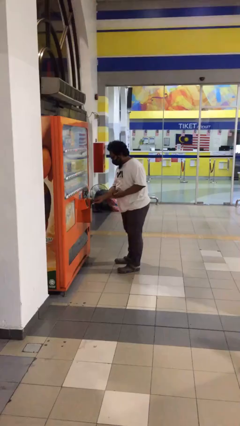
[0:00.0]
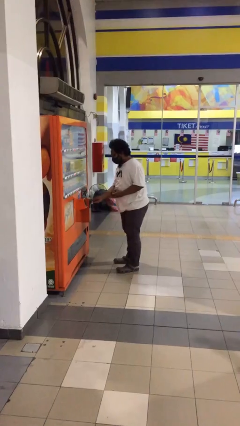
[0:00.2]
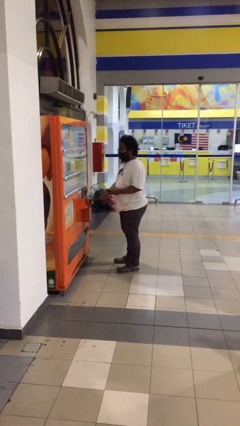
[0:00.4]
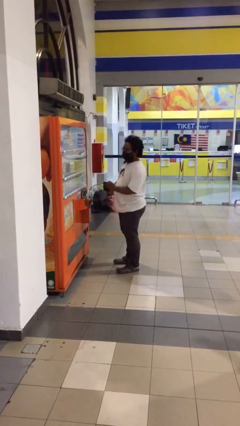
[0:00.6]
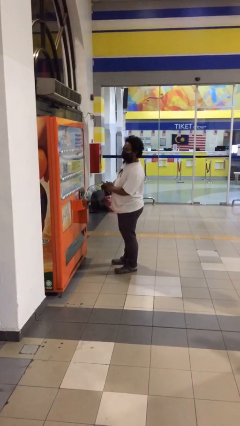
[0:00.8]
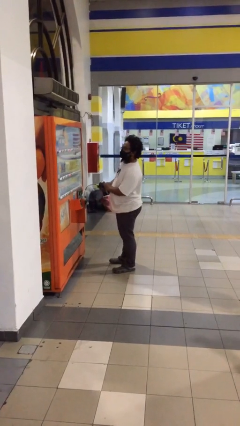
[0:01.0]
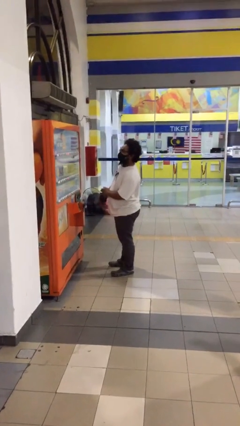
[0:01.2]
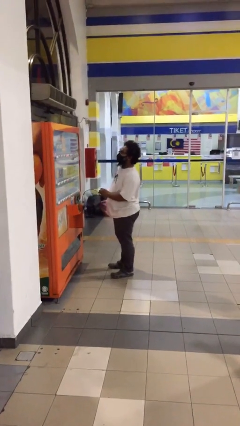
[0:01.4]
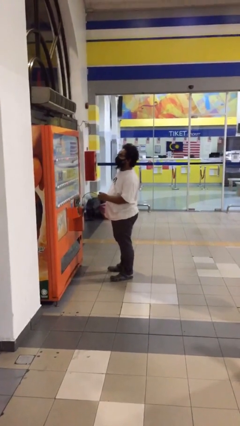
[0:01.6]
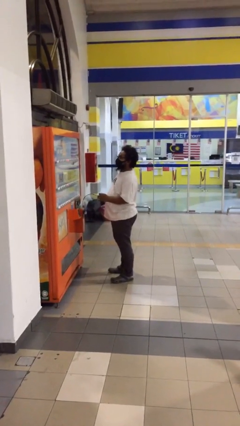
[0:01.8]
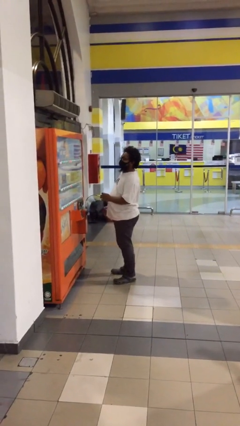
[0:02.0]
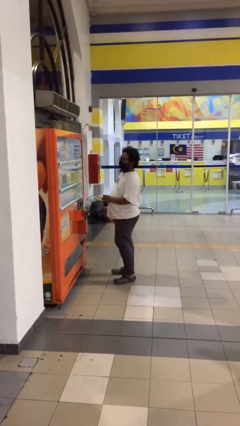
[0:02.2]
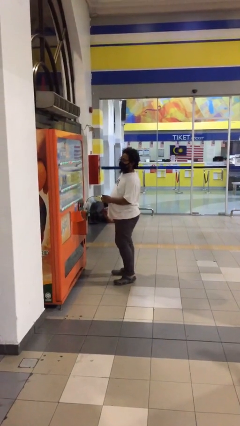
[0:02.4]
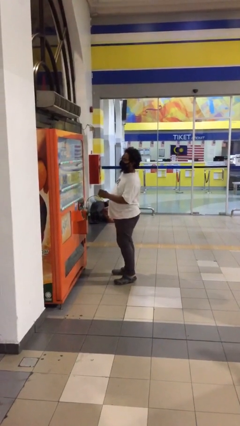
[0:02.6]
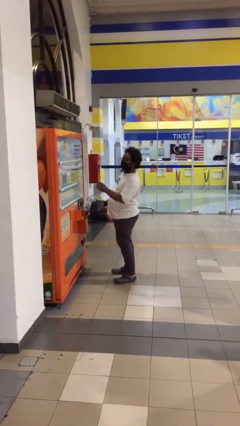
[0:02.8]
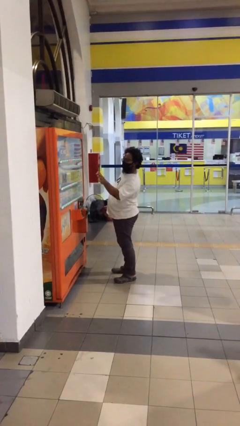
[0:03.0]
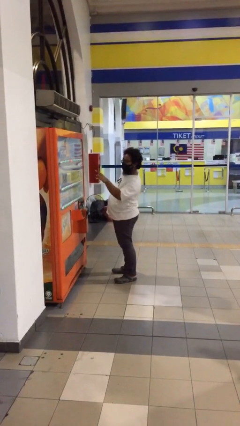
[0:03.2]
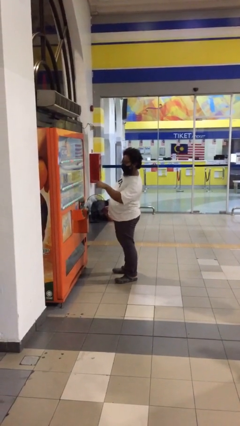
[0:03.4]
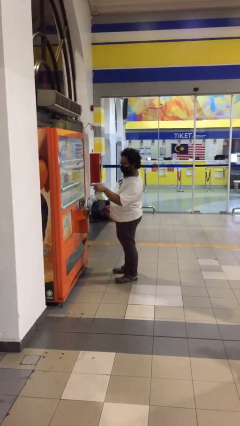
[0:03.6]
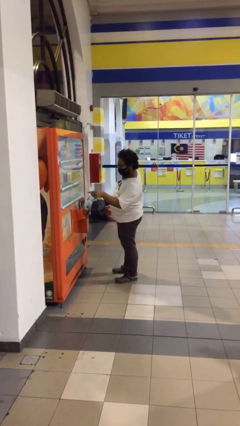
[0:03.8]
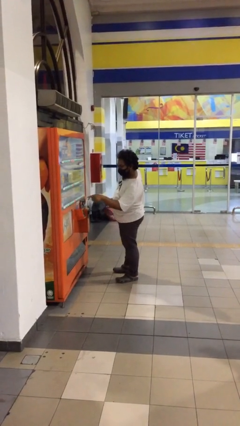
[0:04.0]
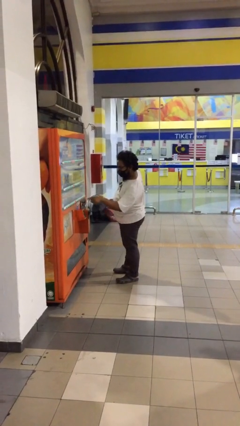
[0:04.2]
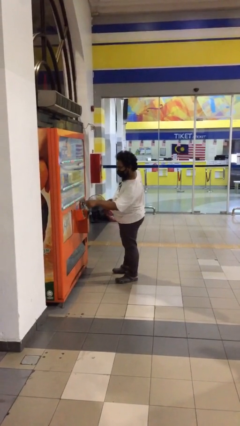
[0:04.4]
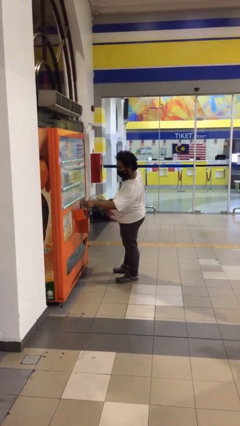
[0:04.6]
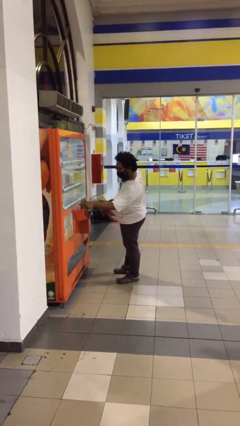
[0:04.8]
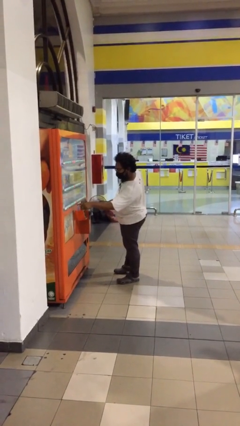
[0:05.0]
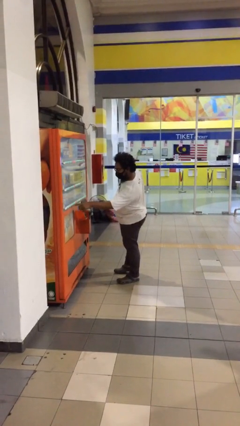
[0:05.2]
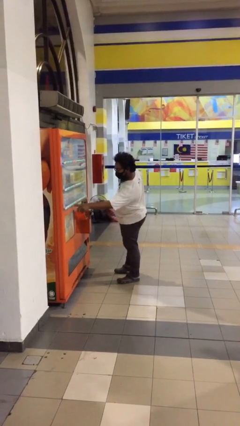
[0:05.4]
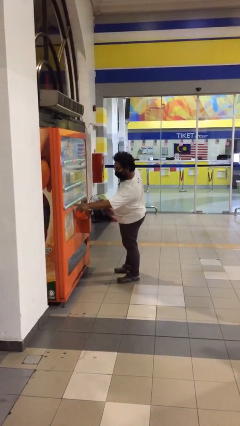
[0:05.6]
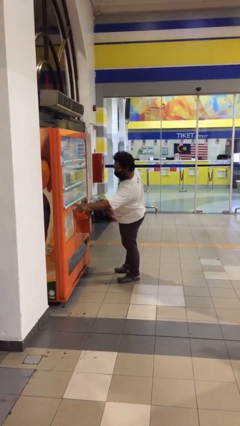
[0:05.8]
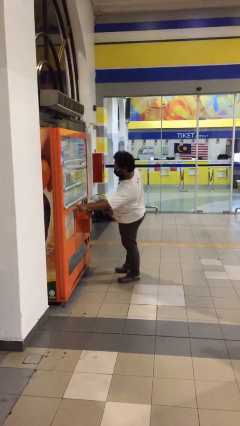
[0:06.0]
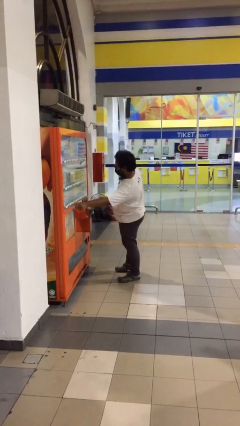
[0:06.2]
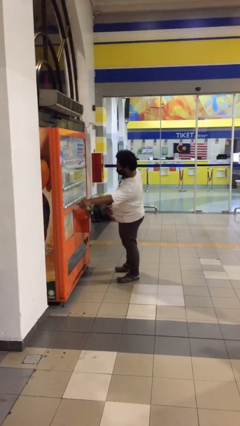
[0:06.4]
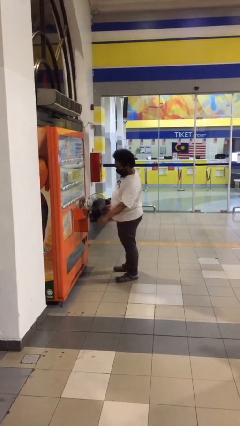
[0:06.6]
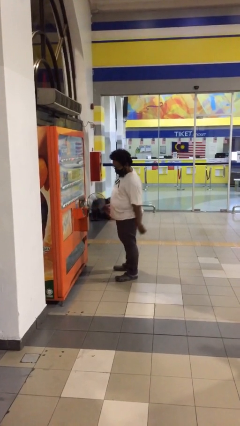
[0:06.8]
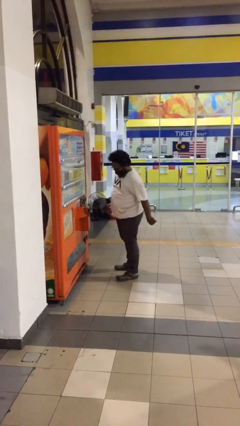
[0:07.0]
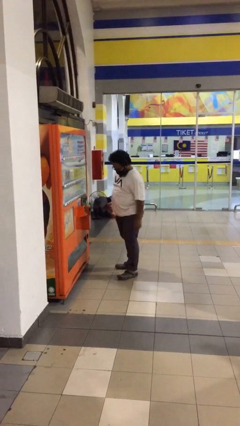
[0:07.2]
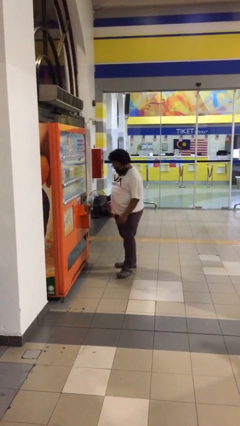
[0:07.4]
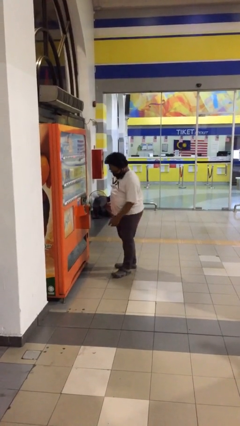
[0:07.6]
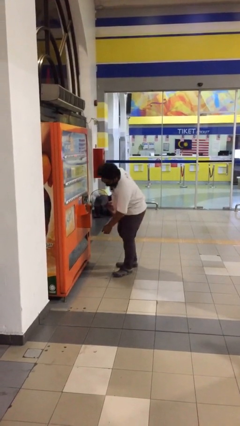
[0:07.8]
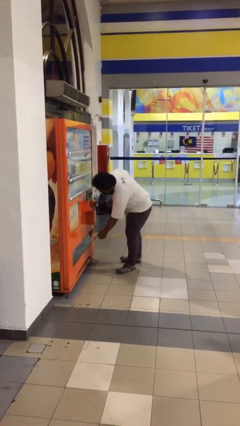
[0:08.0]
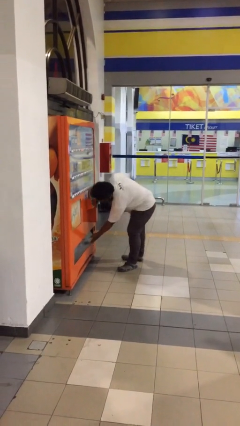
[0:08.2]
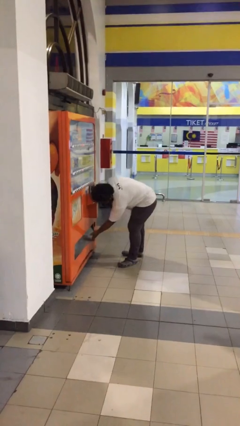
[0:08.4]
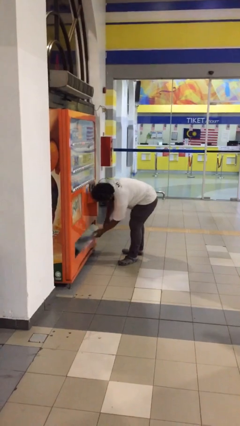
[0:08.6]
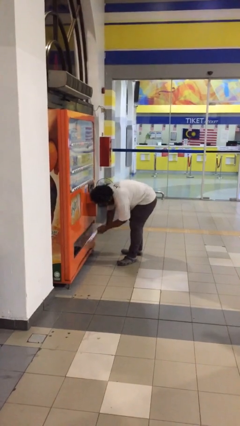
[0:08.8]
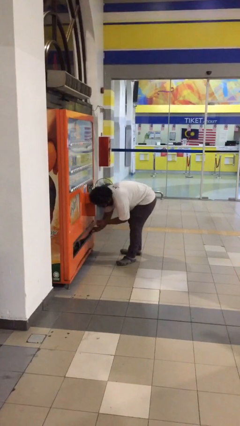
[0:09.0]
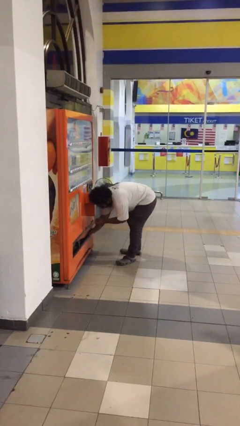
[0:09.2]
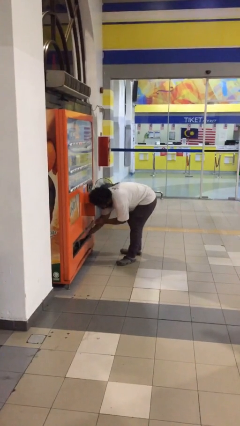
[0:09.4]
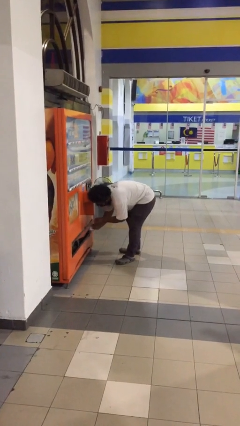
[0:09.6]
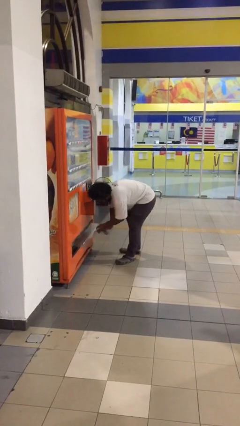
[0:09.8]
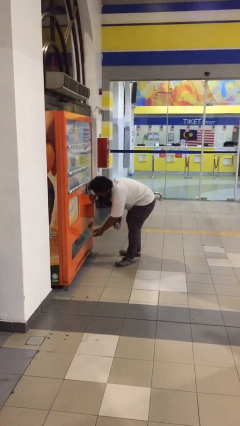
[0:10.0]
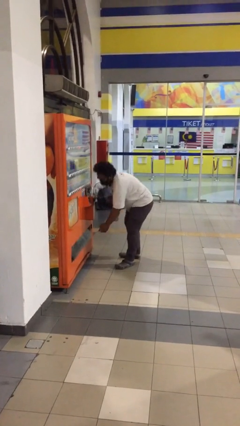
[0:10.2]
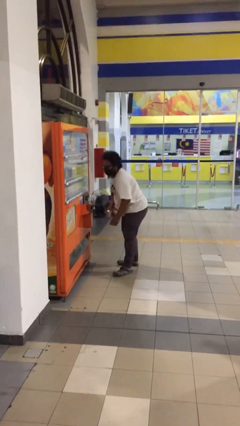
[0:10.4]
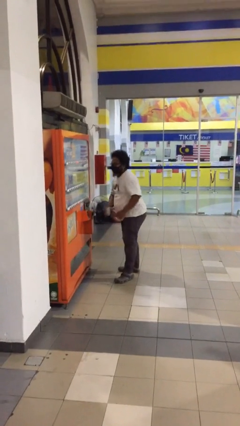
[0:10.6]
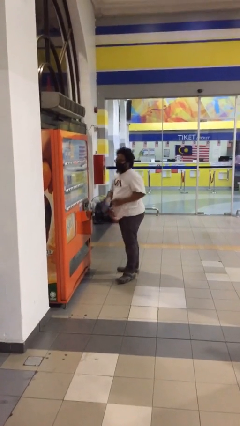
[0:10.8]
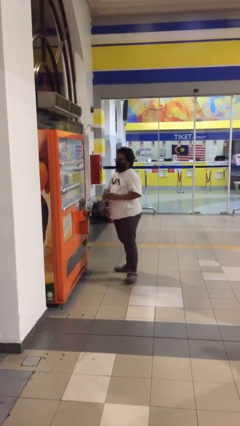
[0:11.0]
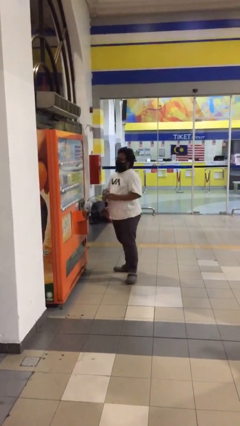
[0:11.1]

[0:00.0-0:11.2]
person purchases from machine

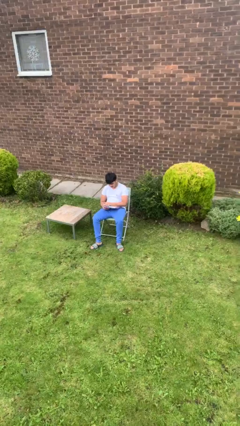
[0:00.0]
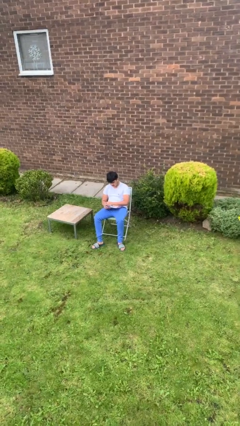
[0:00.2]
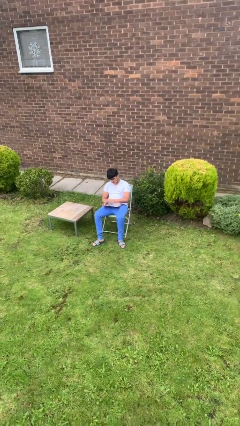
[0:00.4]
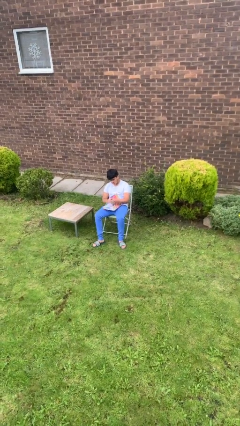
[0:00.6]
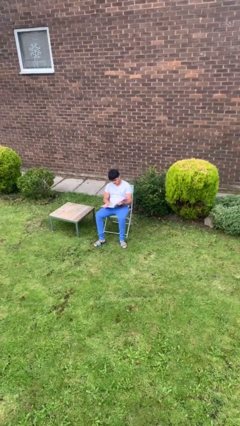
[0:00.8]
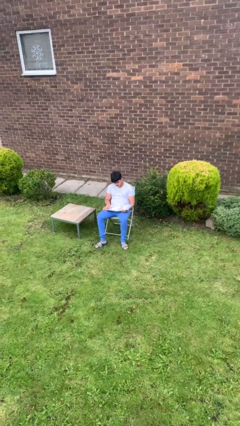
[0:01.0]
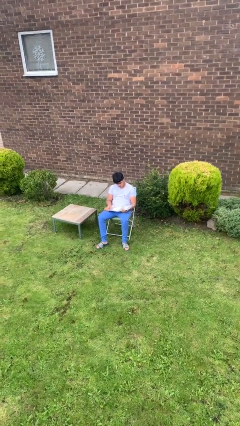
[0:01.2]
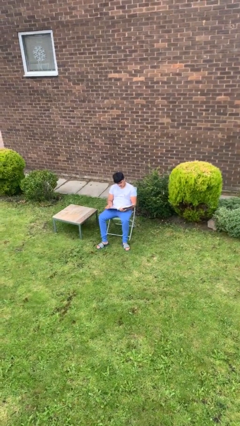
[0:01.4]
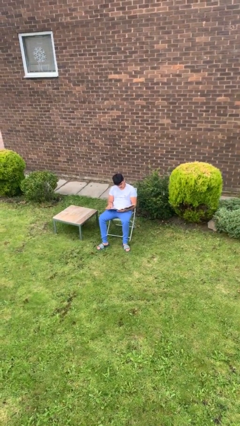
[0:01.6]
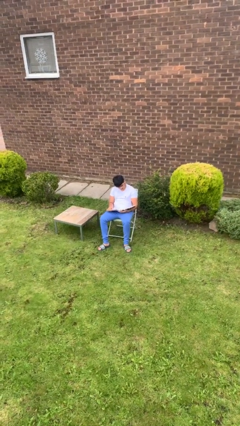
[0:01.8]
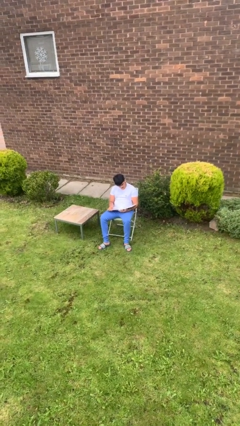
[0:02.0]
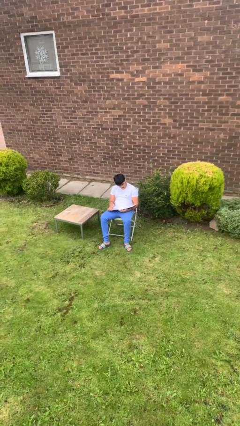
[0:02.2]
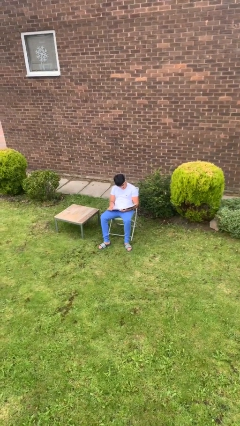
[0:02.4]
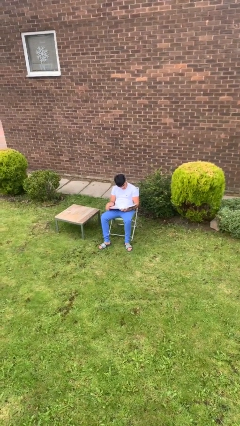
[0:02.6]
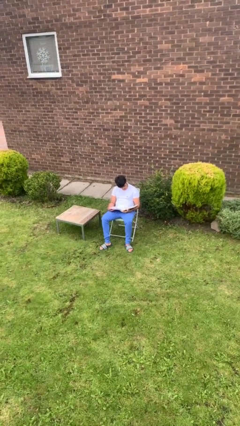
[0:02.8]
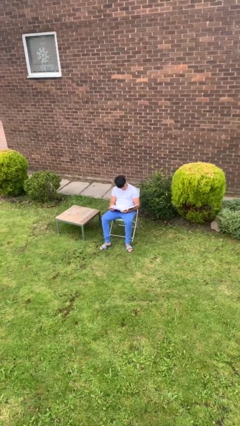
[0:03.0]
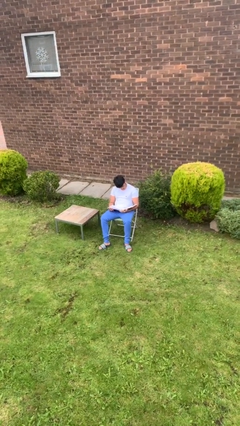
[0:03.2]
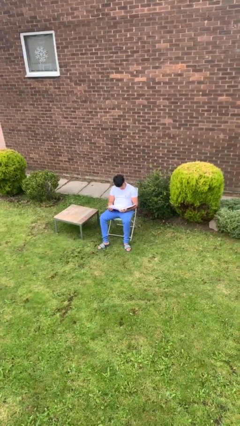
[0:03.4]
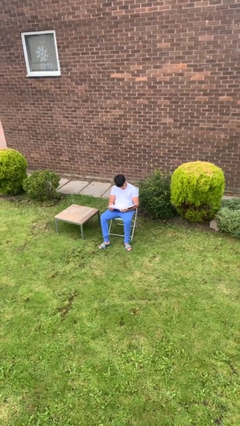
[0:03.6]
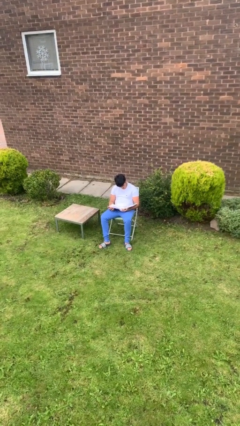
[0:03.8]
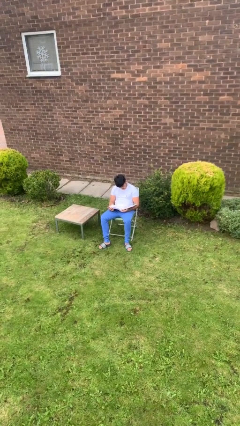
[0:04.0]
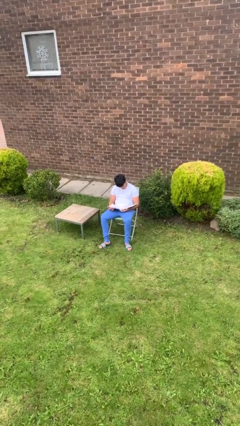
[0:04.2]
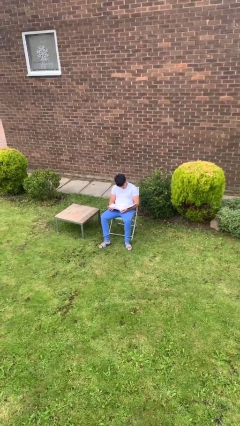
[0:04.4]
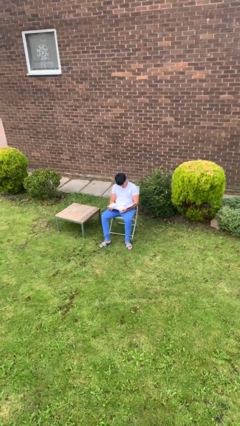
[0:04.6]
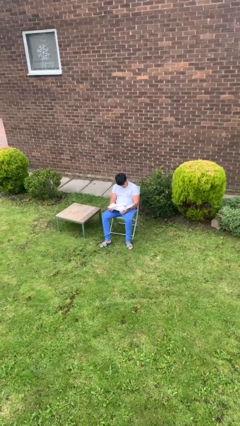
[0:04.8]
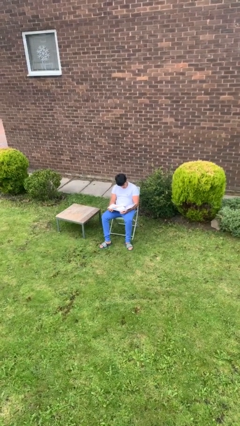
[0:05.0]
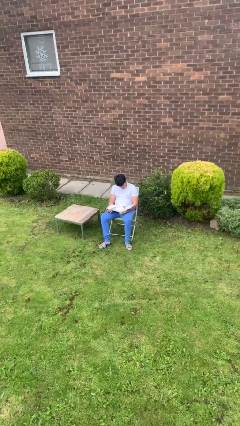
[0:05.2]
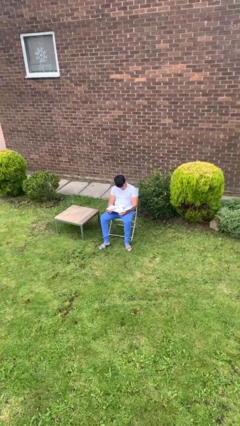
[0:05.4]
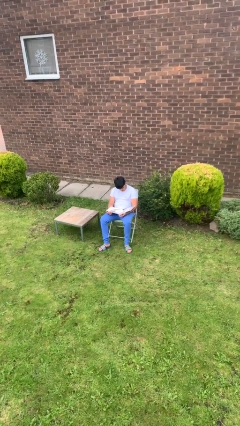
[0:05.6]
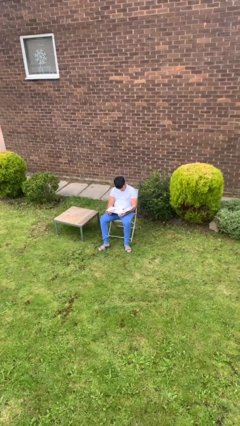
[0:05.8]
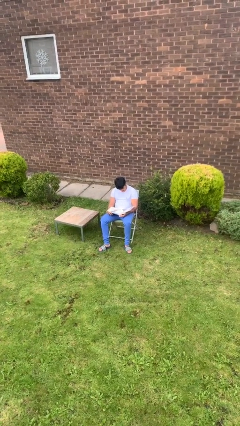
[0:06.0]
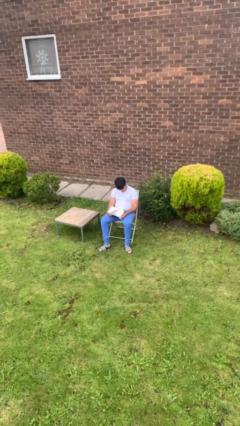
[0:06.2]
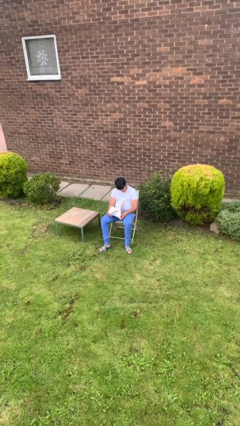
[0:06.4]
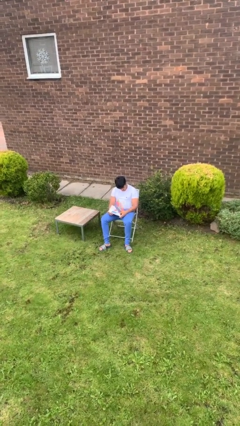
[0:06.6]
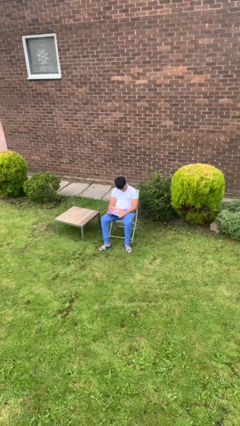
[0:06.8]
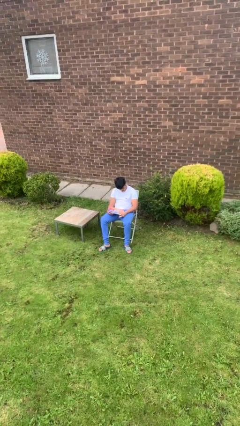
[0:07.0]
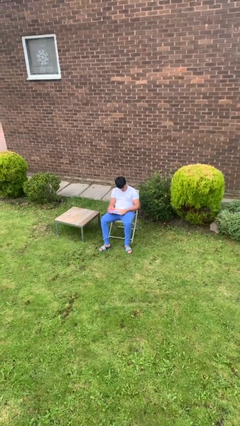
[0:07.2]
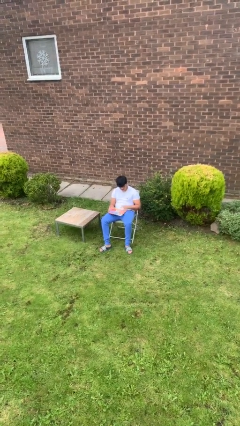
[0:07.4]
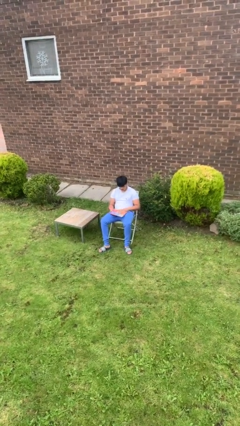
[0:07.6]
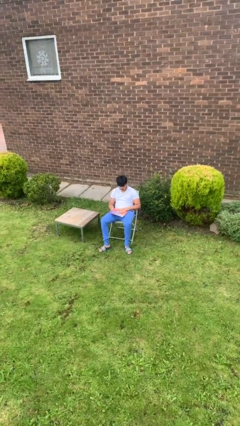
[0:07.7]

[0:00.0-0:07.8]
person reads document
